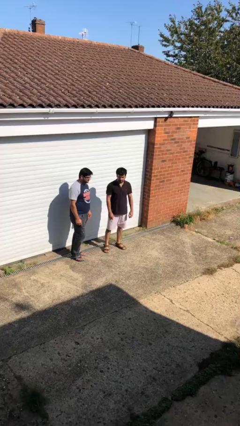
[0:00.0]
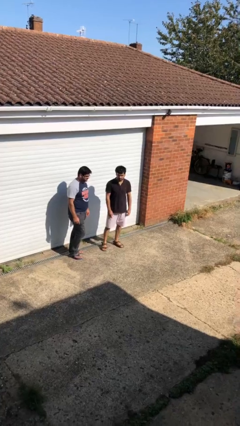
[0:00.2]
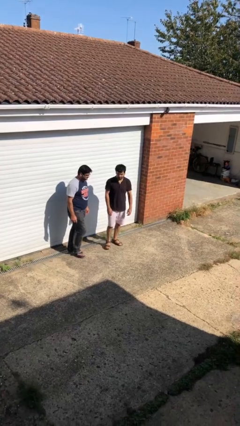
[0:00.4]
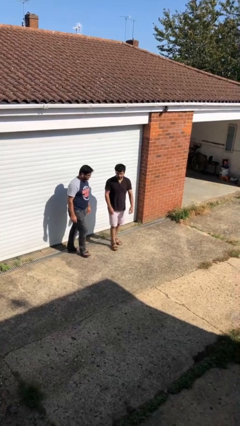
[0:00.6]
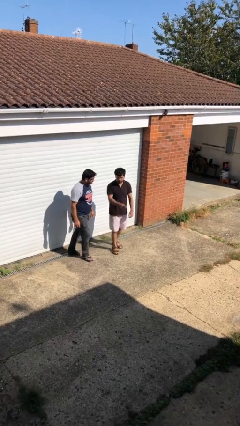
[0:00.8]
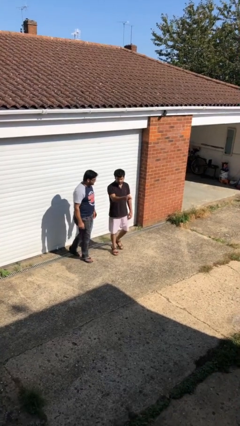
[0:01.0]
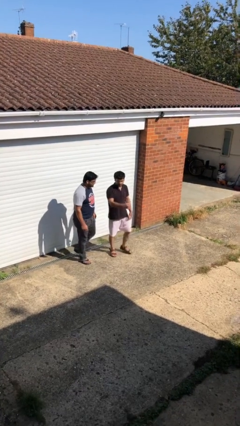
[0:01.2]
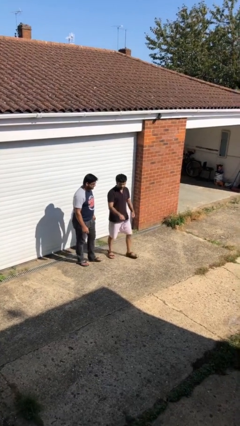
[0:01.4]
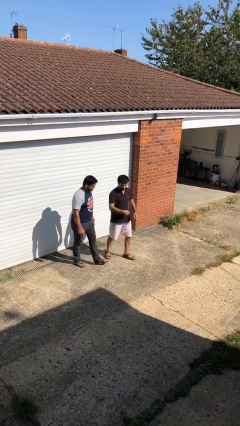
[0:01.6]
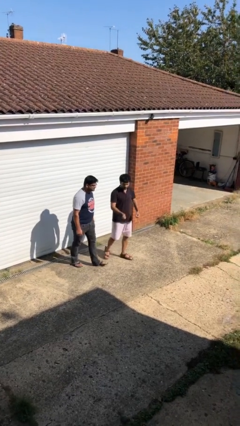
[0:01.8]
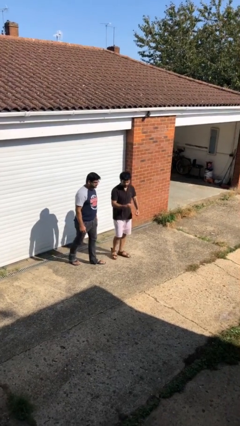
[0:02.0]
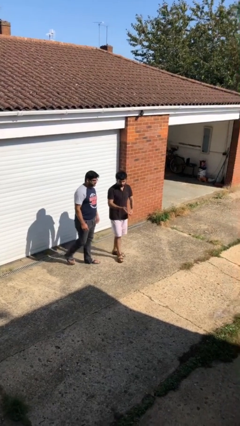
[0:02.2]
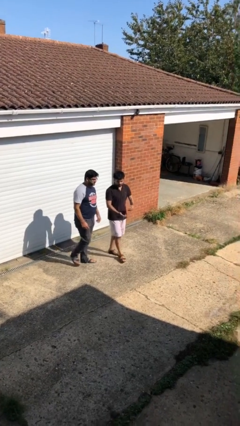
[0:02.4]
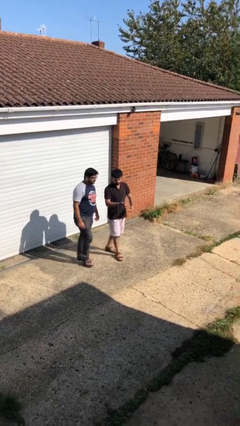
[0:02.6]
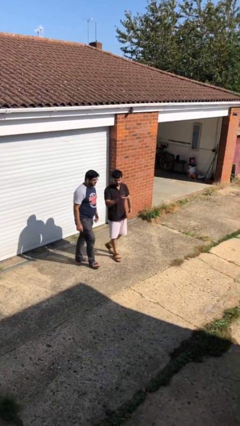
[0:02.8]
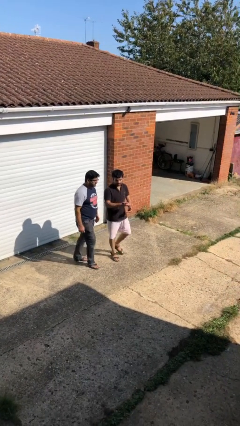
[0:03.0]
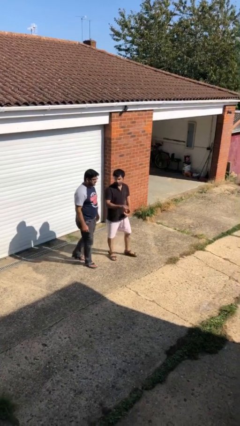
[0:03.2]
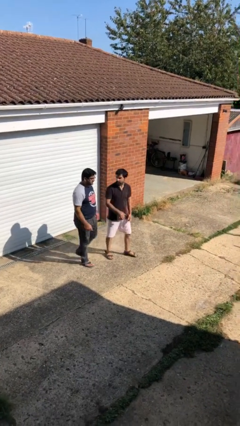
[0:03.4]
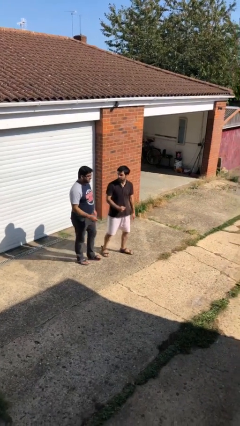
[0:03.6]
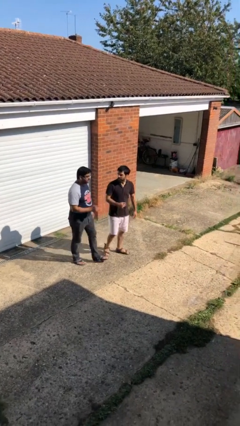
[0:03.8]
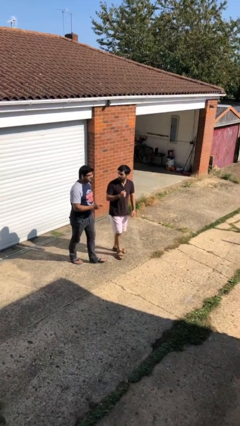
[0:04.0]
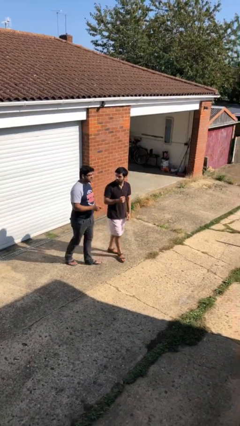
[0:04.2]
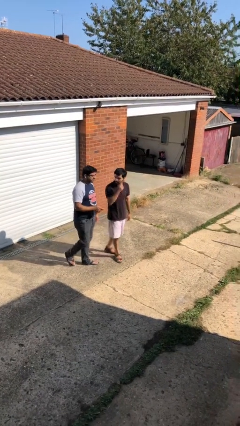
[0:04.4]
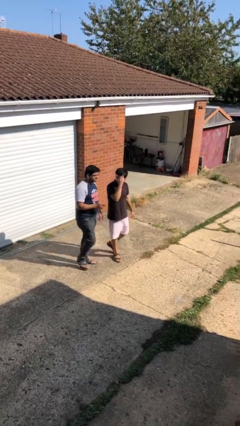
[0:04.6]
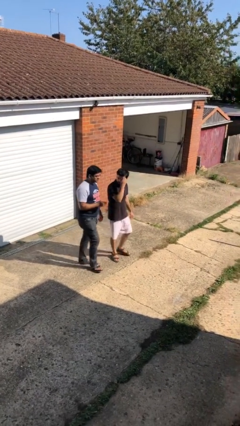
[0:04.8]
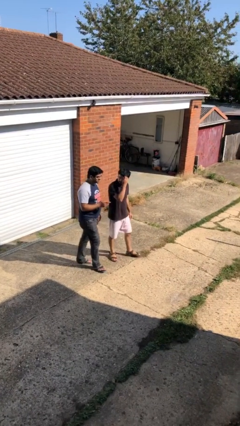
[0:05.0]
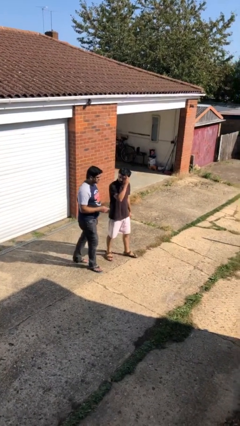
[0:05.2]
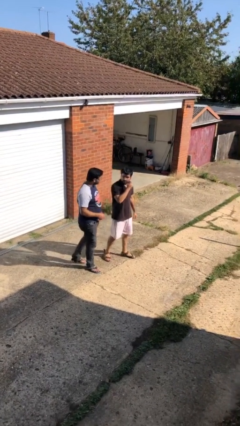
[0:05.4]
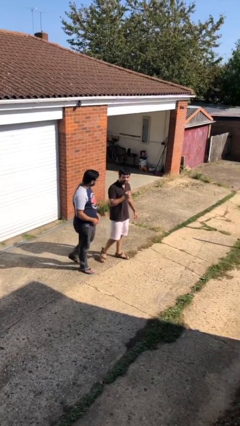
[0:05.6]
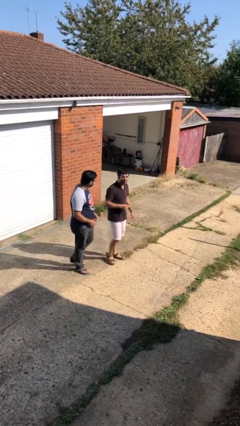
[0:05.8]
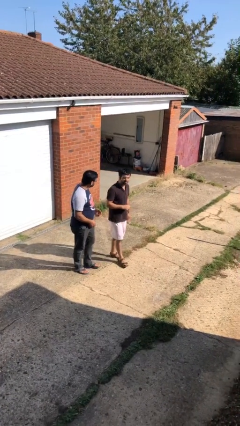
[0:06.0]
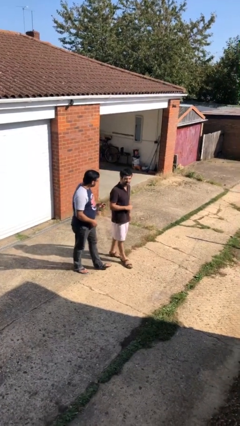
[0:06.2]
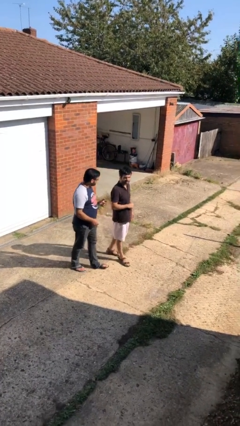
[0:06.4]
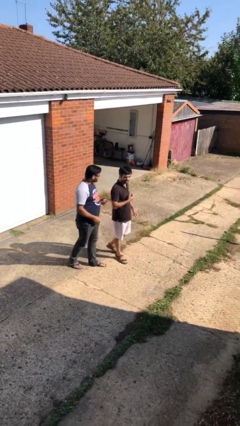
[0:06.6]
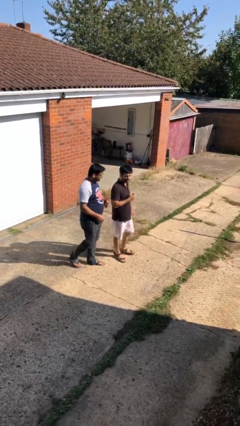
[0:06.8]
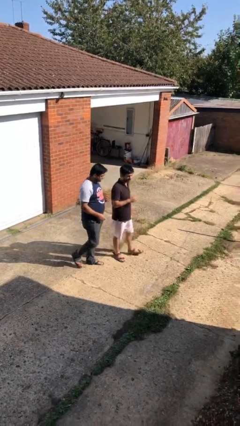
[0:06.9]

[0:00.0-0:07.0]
person talks to person

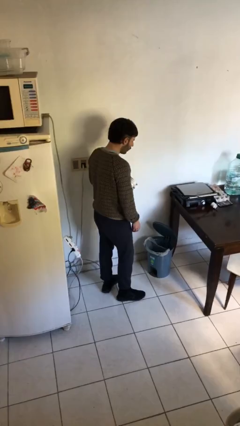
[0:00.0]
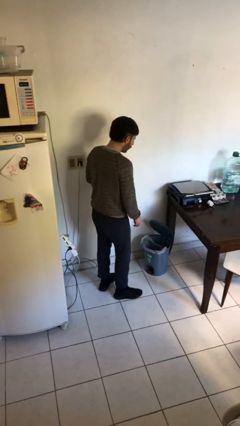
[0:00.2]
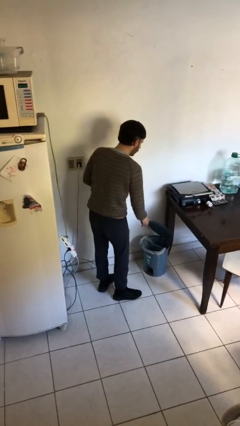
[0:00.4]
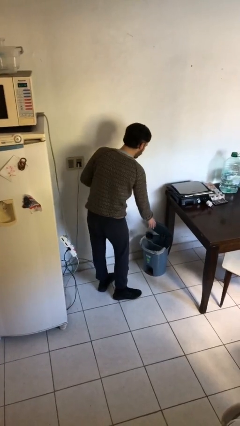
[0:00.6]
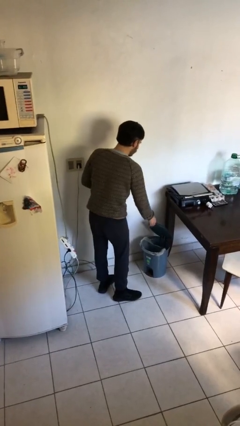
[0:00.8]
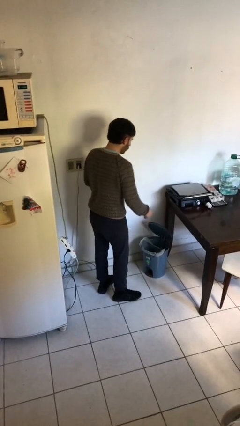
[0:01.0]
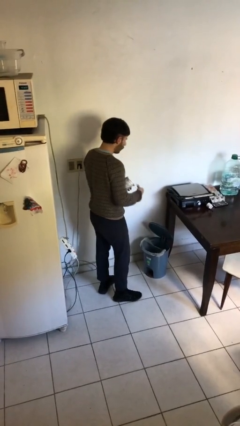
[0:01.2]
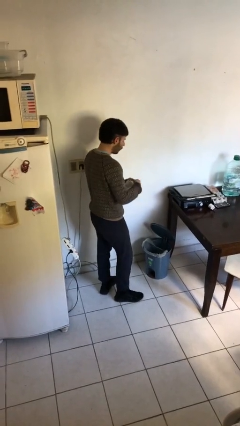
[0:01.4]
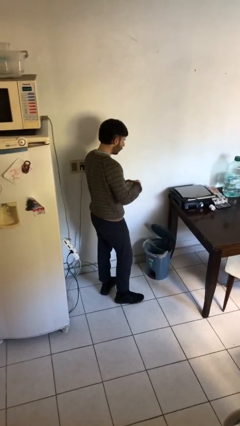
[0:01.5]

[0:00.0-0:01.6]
person discards trash

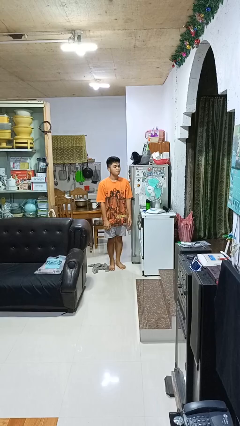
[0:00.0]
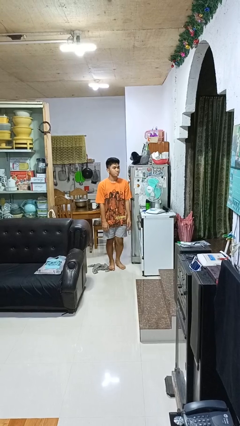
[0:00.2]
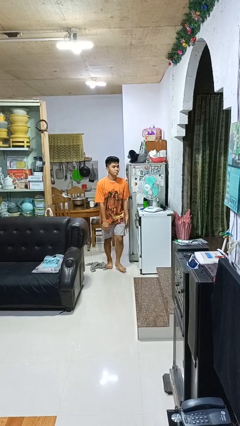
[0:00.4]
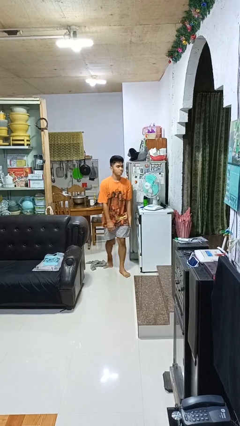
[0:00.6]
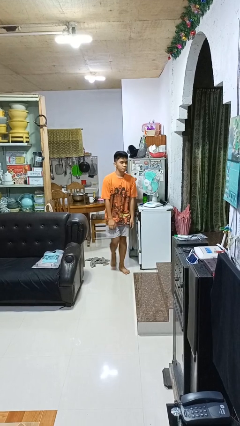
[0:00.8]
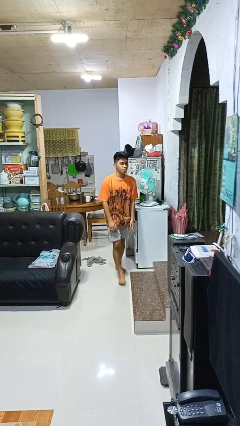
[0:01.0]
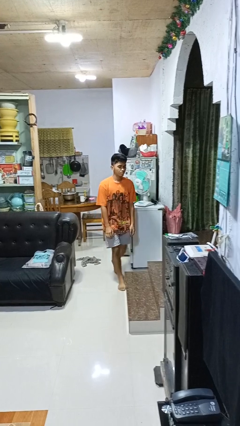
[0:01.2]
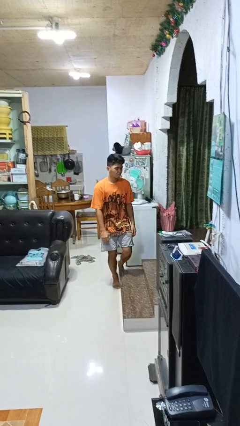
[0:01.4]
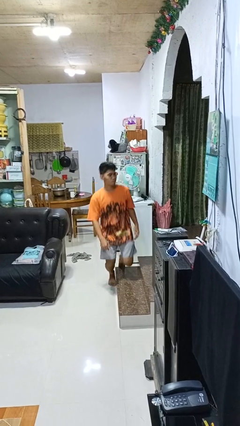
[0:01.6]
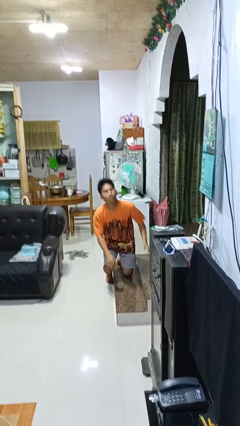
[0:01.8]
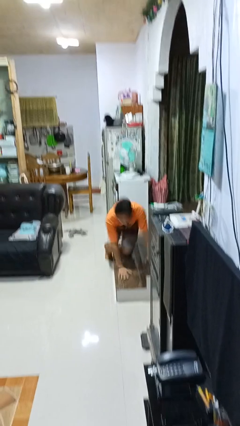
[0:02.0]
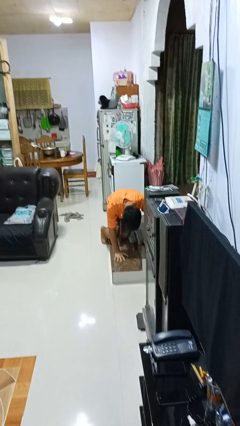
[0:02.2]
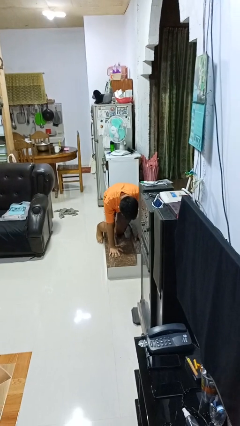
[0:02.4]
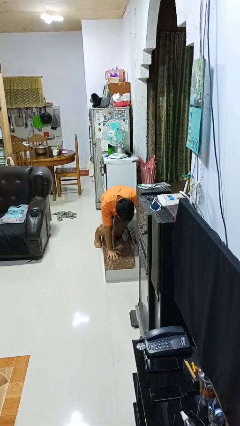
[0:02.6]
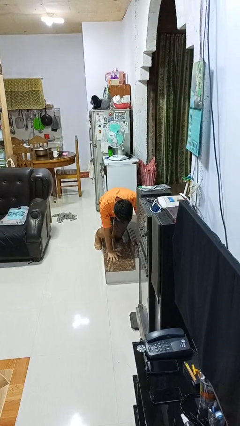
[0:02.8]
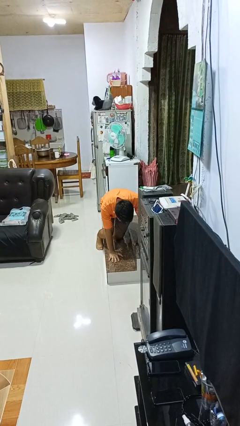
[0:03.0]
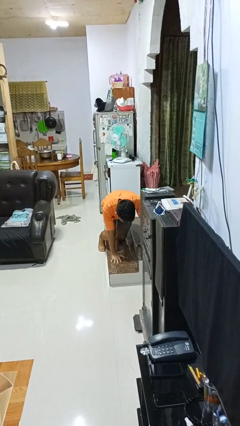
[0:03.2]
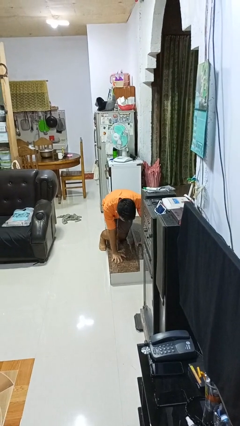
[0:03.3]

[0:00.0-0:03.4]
person trips on object on floor

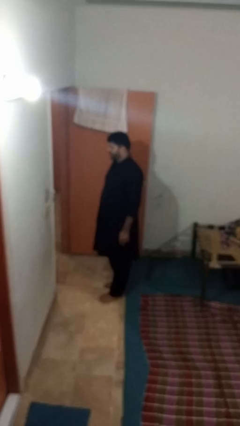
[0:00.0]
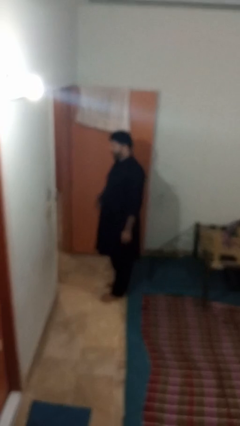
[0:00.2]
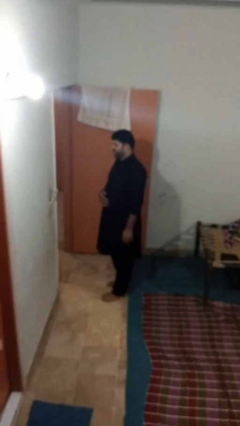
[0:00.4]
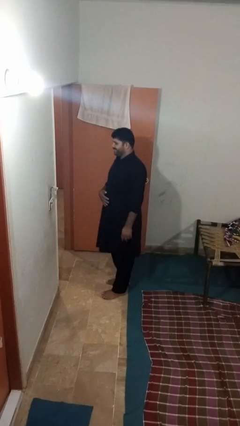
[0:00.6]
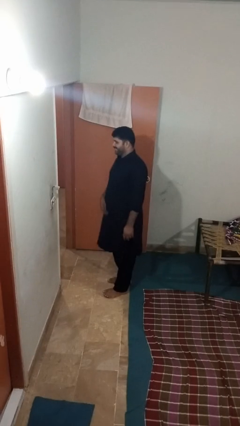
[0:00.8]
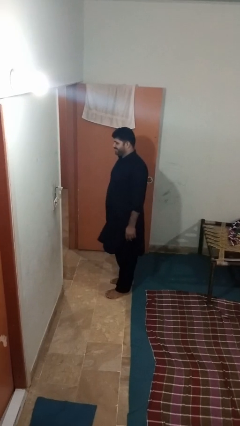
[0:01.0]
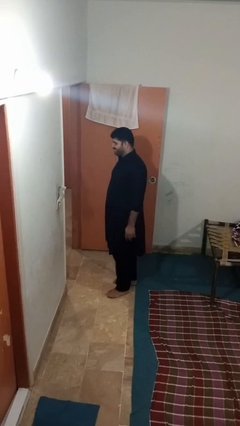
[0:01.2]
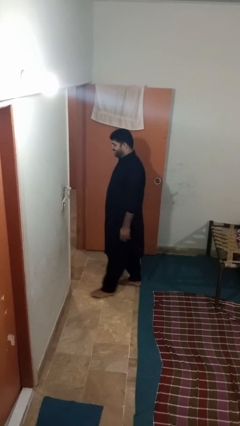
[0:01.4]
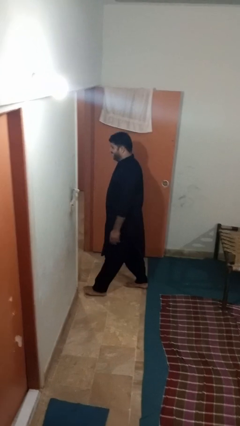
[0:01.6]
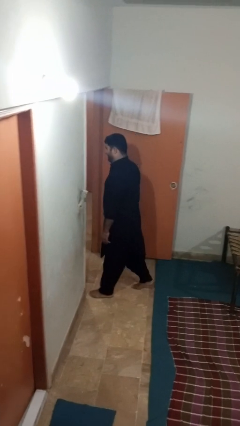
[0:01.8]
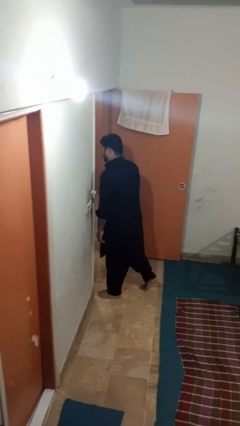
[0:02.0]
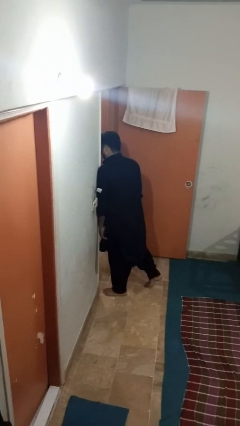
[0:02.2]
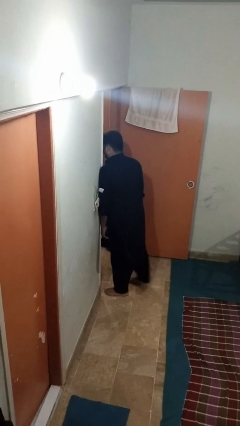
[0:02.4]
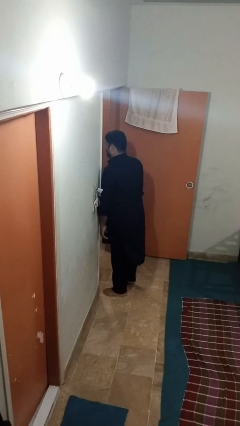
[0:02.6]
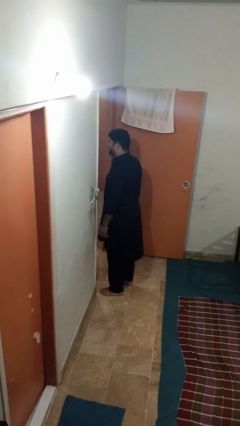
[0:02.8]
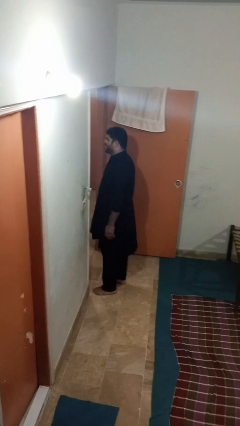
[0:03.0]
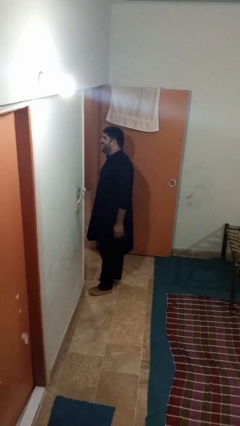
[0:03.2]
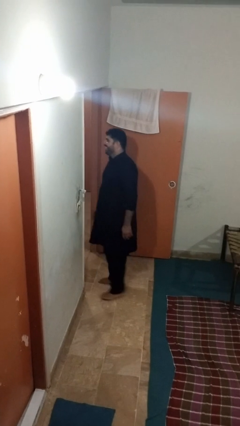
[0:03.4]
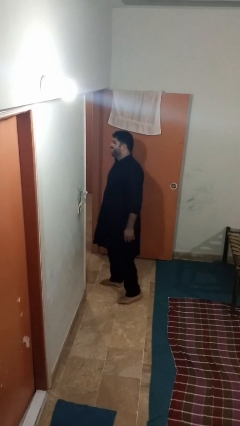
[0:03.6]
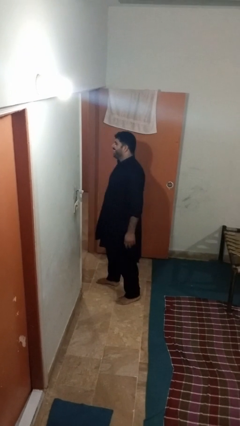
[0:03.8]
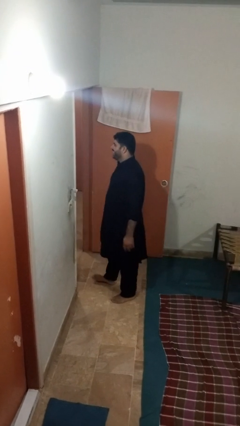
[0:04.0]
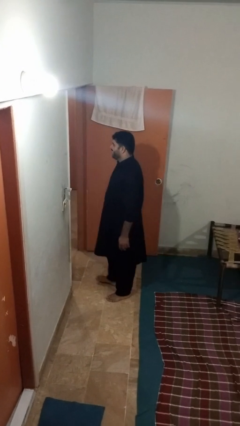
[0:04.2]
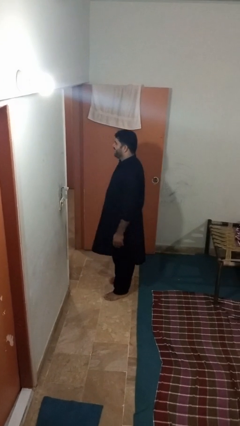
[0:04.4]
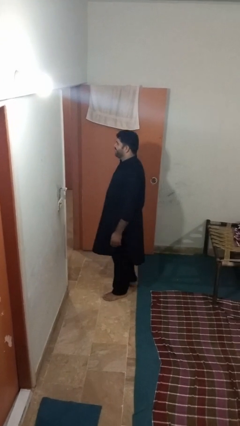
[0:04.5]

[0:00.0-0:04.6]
person bumps into wall

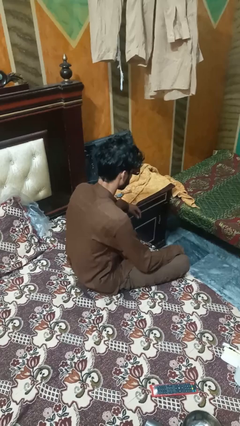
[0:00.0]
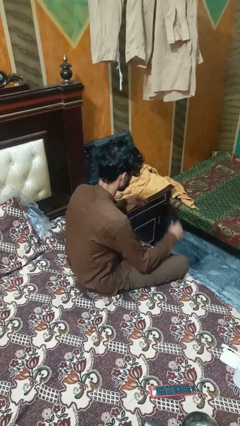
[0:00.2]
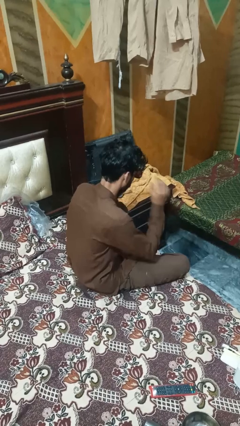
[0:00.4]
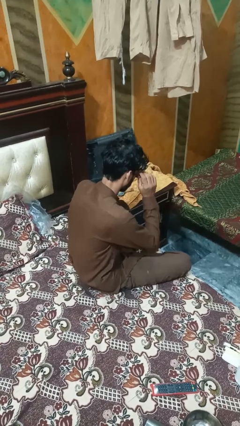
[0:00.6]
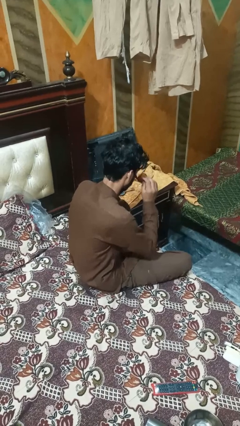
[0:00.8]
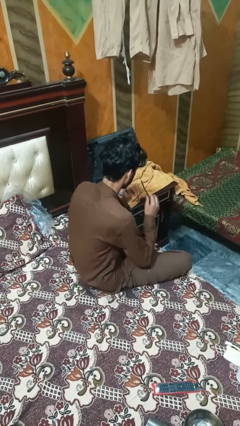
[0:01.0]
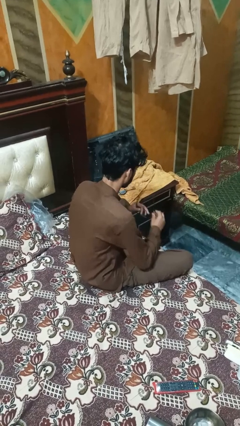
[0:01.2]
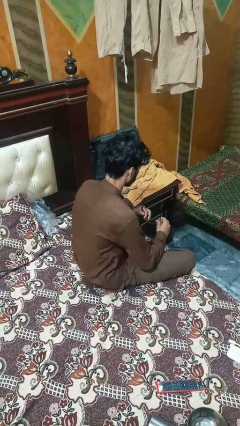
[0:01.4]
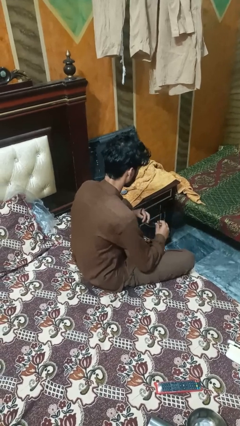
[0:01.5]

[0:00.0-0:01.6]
person takes off sunglasses
